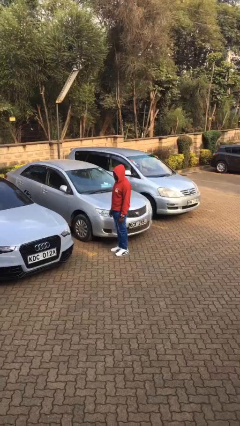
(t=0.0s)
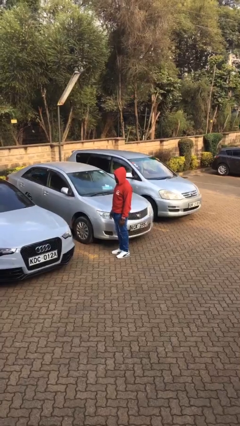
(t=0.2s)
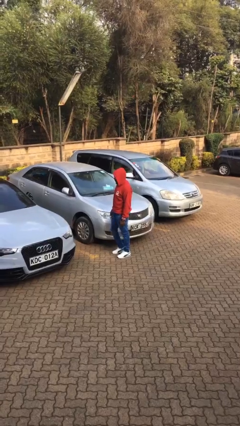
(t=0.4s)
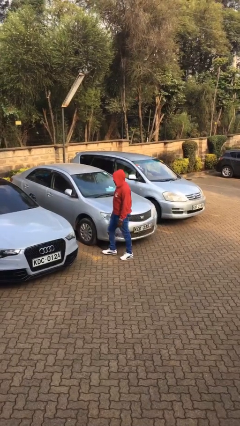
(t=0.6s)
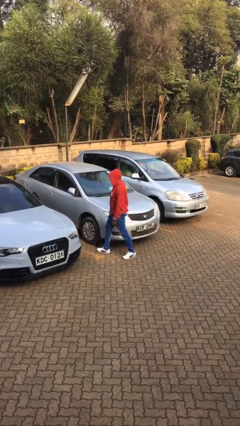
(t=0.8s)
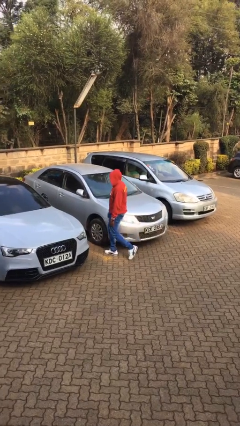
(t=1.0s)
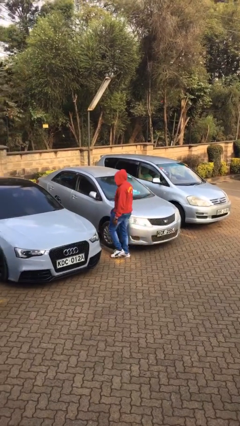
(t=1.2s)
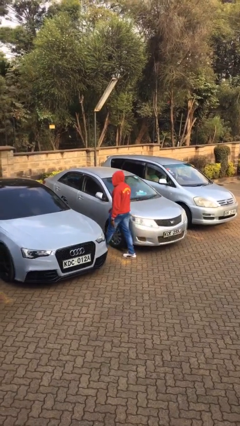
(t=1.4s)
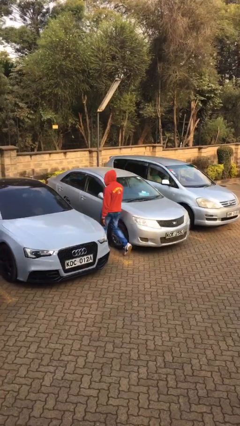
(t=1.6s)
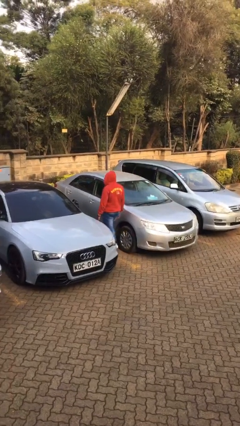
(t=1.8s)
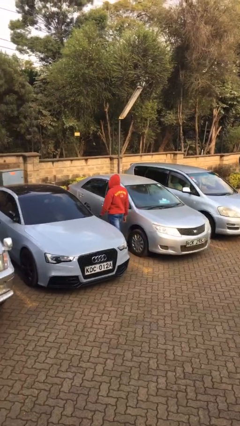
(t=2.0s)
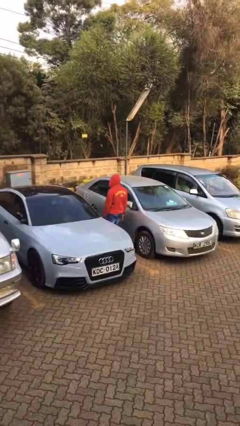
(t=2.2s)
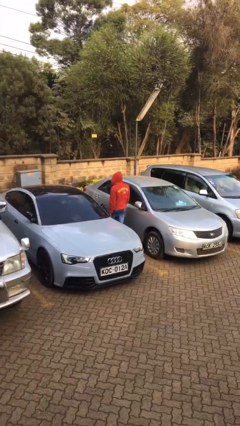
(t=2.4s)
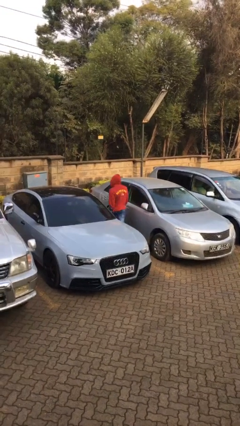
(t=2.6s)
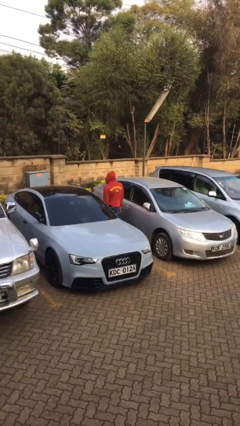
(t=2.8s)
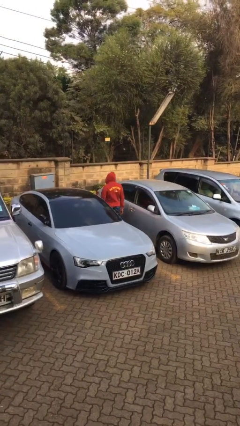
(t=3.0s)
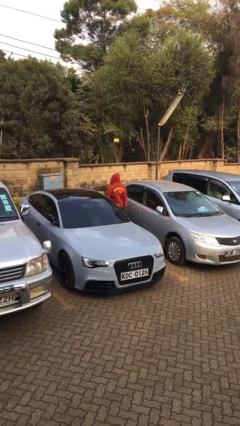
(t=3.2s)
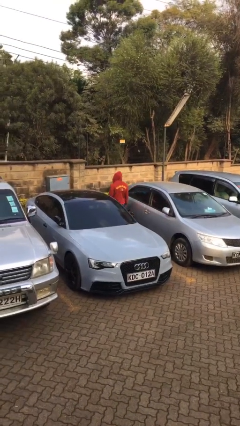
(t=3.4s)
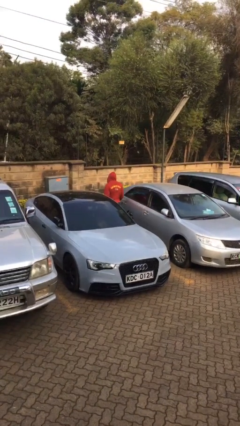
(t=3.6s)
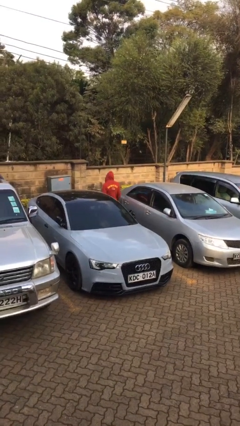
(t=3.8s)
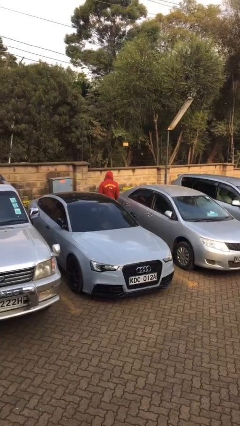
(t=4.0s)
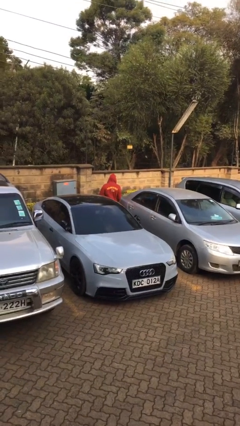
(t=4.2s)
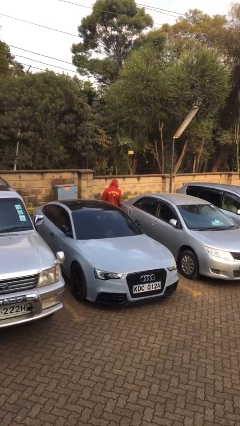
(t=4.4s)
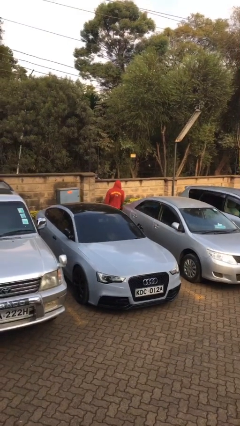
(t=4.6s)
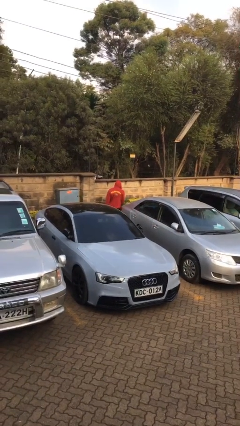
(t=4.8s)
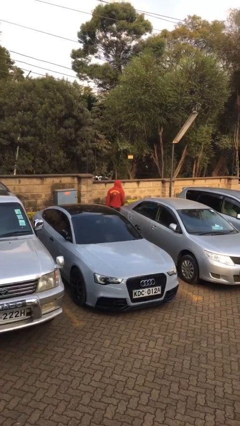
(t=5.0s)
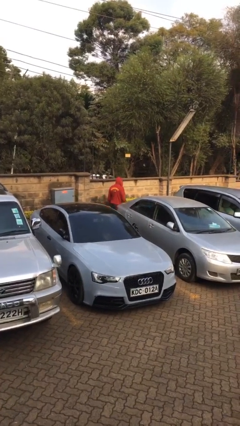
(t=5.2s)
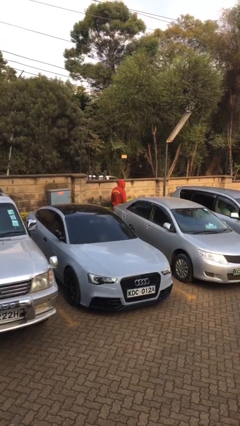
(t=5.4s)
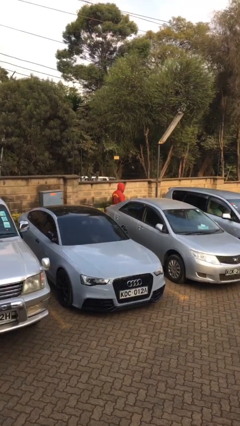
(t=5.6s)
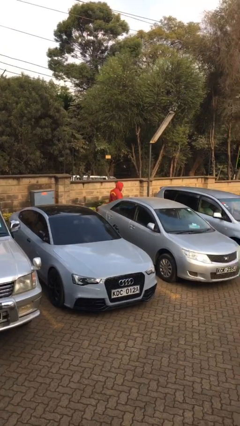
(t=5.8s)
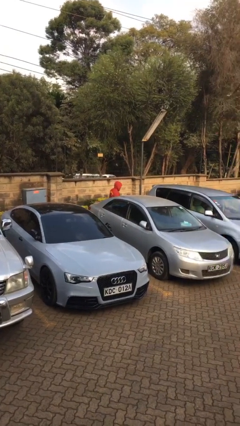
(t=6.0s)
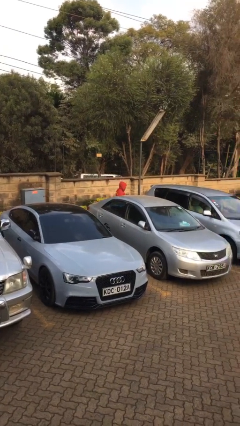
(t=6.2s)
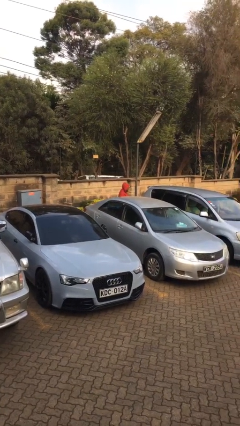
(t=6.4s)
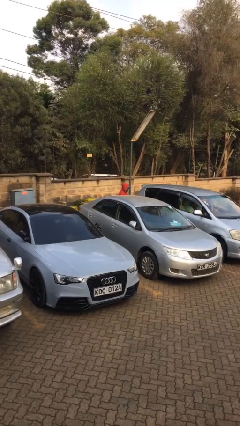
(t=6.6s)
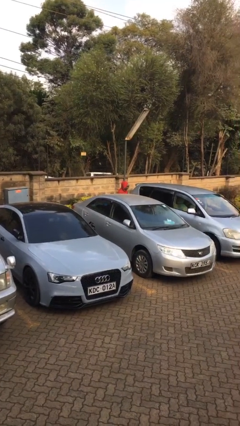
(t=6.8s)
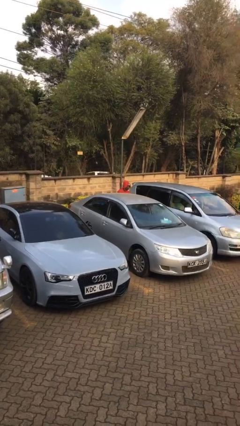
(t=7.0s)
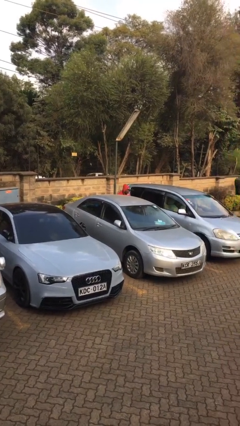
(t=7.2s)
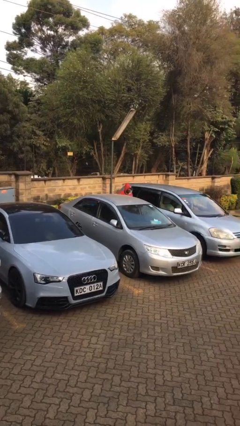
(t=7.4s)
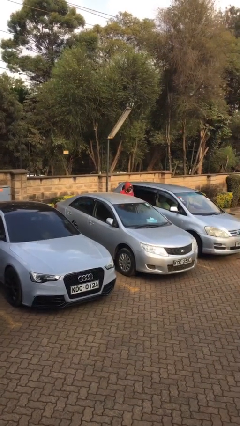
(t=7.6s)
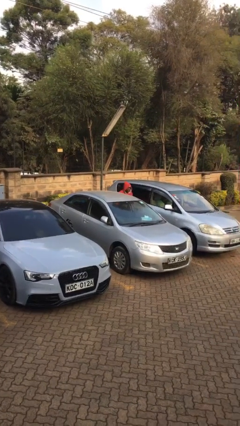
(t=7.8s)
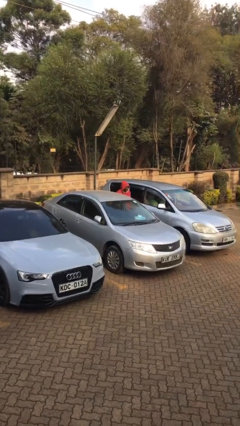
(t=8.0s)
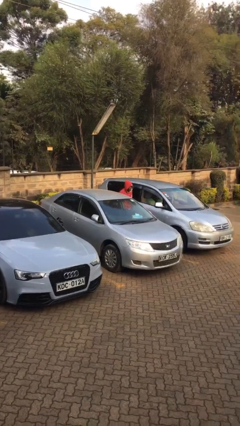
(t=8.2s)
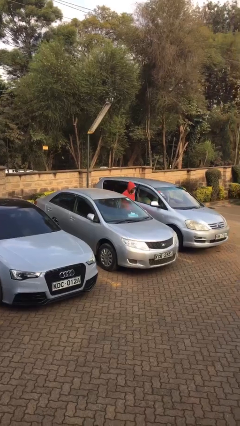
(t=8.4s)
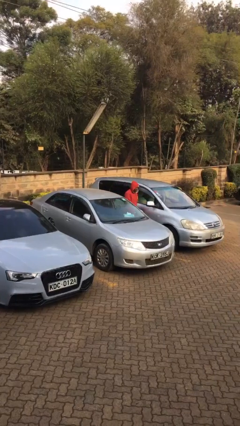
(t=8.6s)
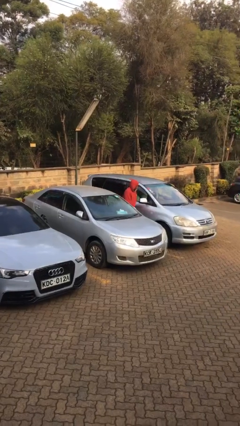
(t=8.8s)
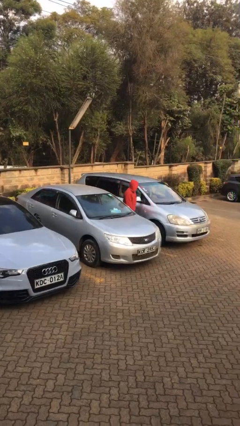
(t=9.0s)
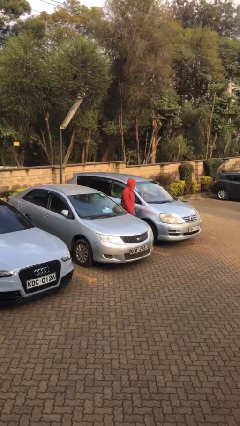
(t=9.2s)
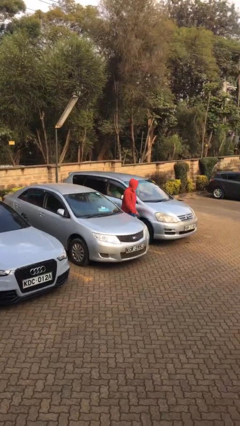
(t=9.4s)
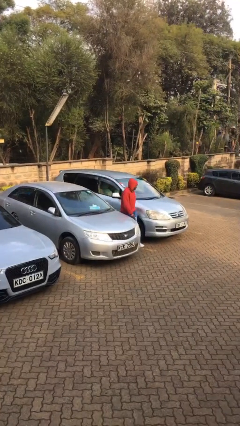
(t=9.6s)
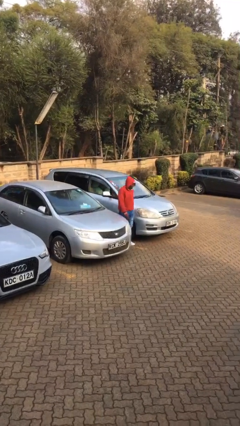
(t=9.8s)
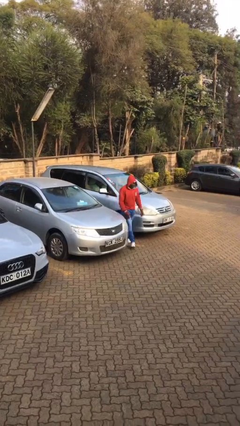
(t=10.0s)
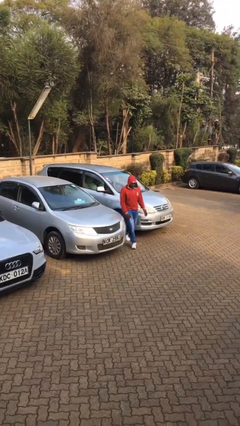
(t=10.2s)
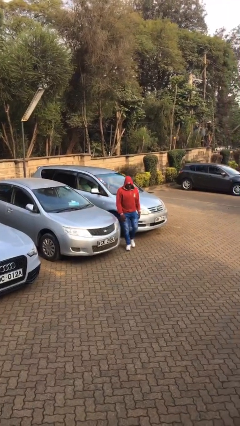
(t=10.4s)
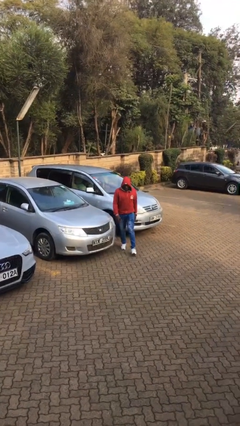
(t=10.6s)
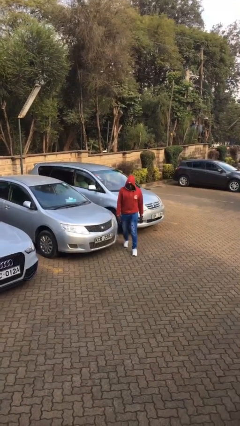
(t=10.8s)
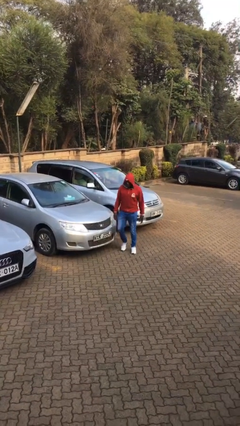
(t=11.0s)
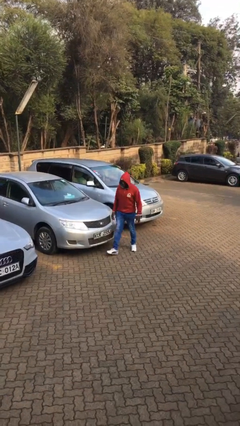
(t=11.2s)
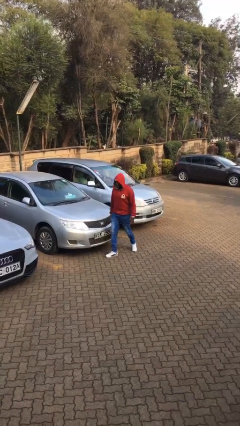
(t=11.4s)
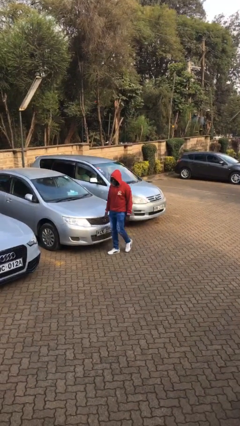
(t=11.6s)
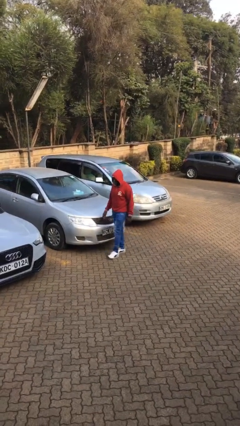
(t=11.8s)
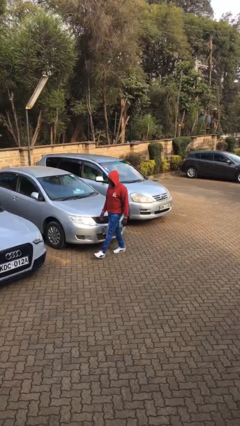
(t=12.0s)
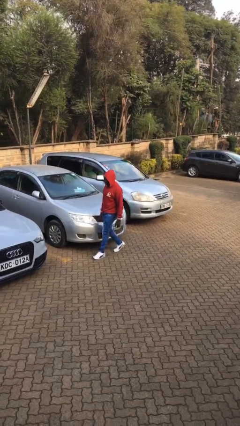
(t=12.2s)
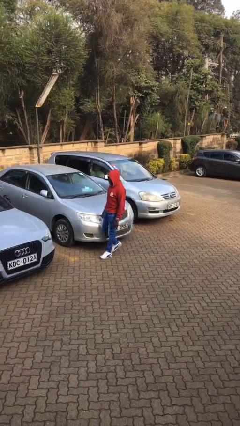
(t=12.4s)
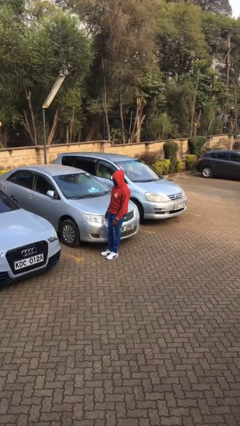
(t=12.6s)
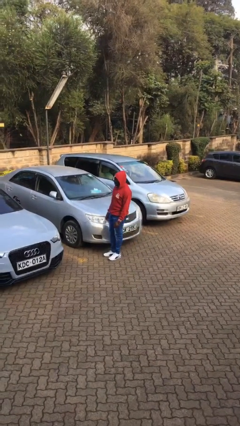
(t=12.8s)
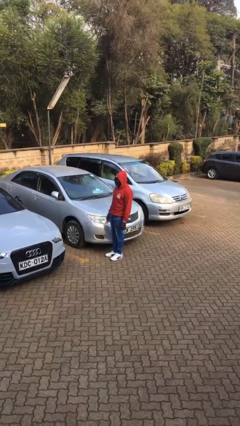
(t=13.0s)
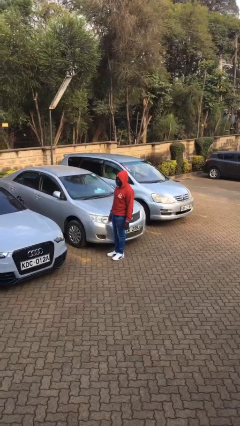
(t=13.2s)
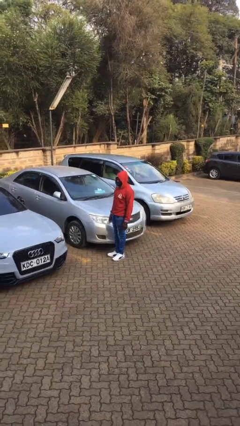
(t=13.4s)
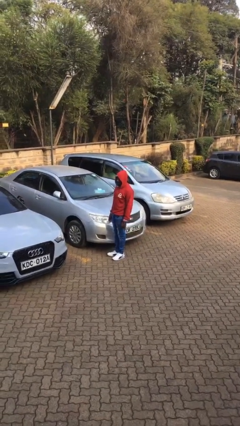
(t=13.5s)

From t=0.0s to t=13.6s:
person walks around car

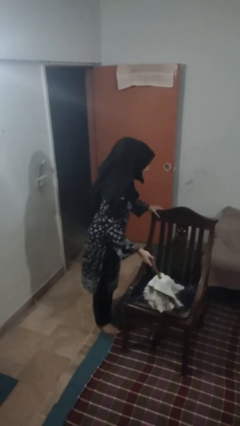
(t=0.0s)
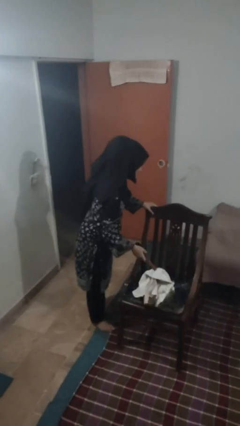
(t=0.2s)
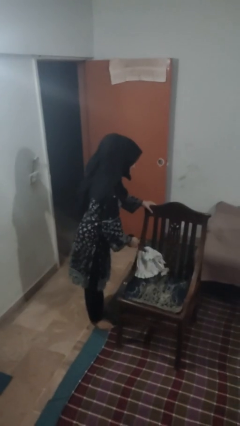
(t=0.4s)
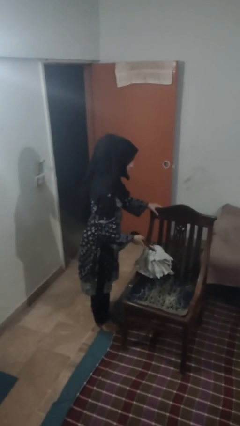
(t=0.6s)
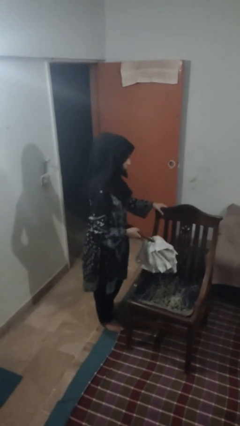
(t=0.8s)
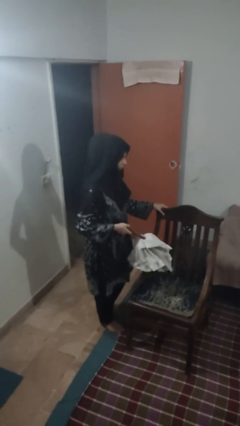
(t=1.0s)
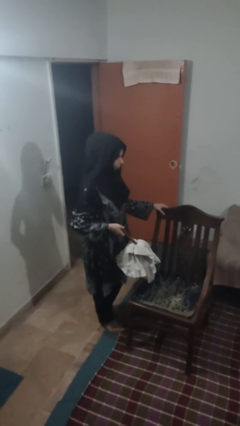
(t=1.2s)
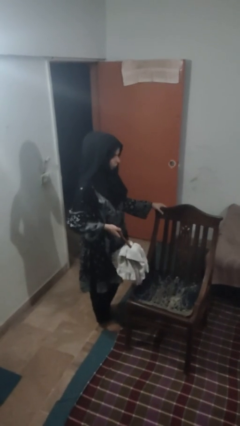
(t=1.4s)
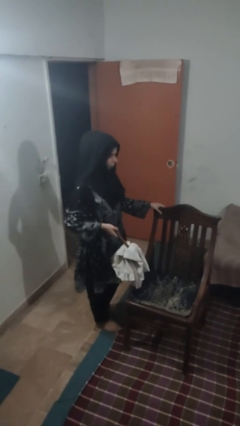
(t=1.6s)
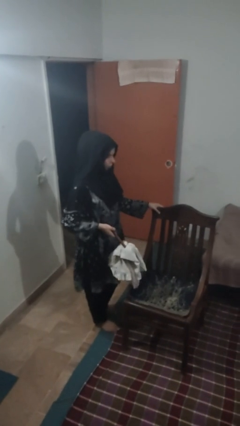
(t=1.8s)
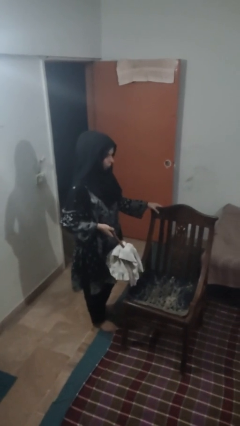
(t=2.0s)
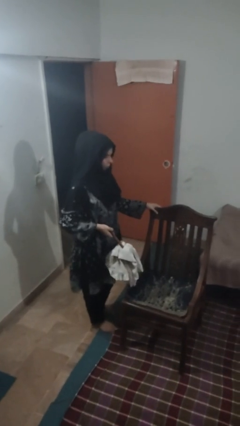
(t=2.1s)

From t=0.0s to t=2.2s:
person dusts furniture

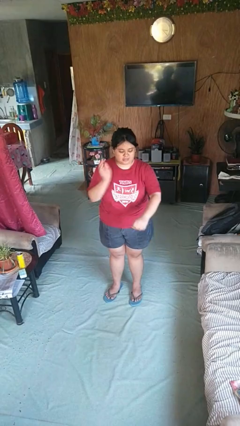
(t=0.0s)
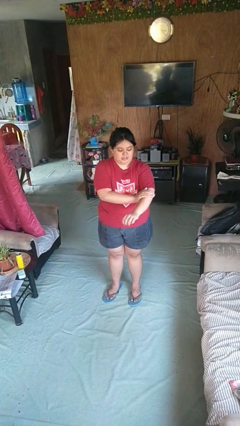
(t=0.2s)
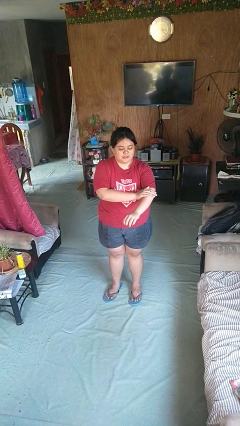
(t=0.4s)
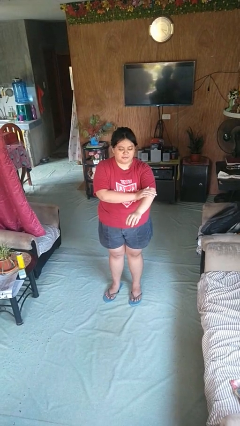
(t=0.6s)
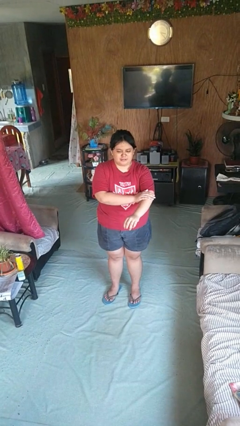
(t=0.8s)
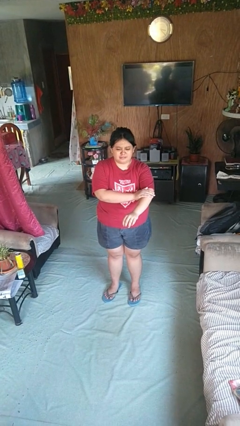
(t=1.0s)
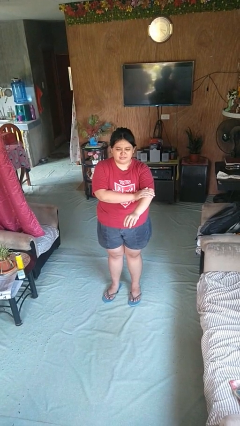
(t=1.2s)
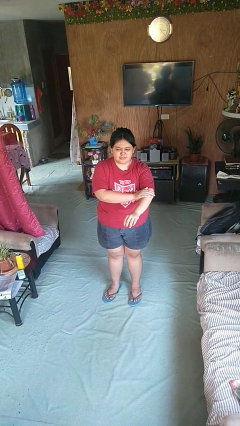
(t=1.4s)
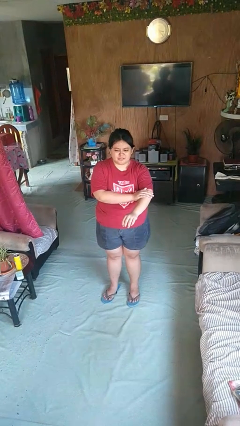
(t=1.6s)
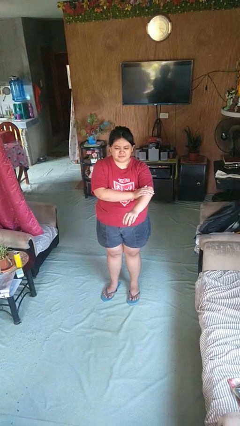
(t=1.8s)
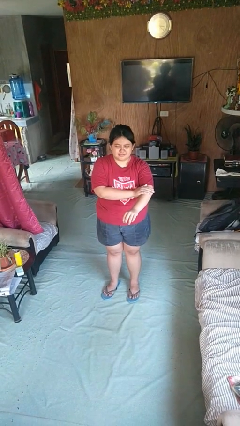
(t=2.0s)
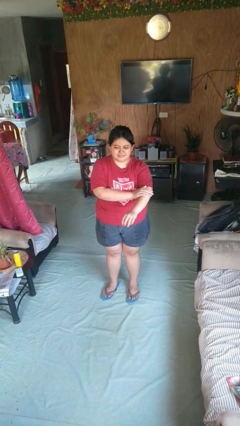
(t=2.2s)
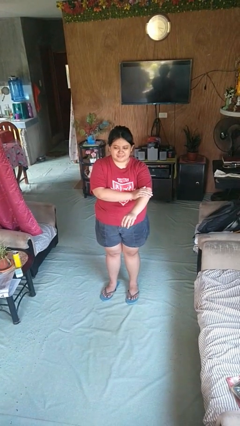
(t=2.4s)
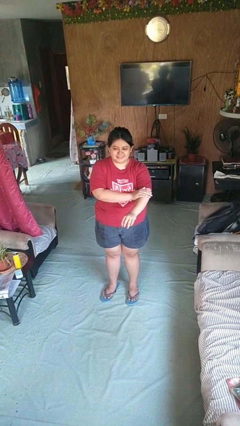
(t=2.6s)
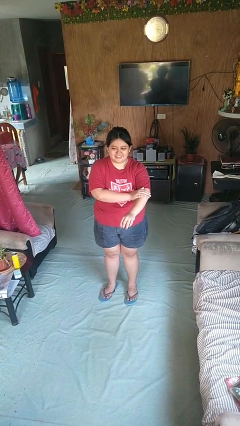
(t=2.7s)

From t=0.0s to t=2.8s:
person swats bug
